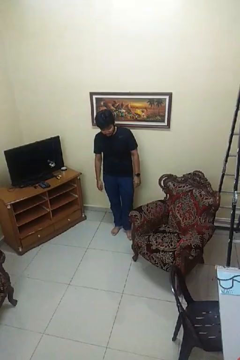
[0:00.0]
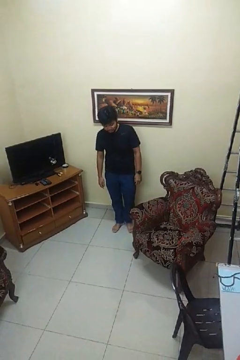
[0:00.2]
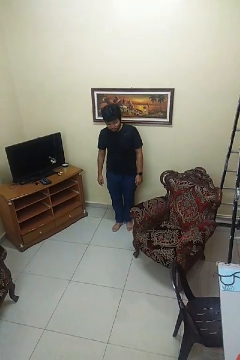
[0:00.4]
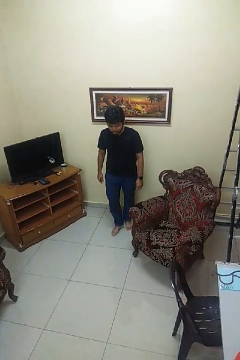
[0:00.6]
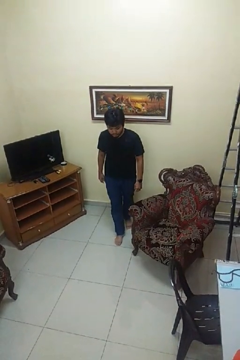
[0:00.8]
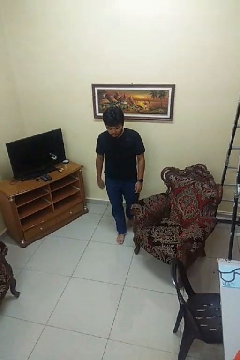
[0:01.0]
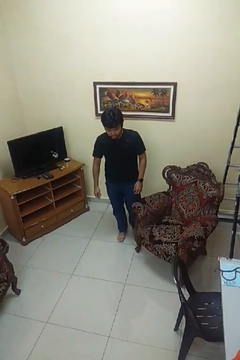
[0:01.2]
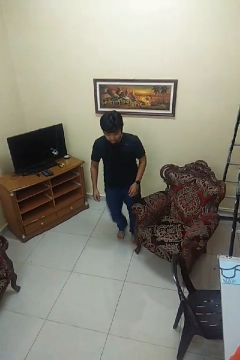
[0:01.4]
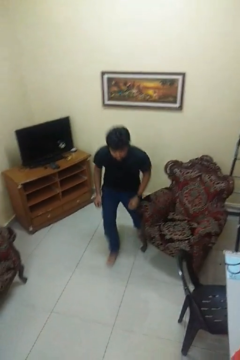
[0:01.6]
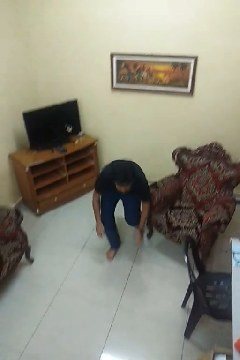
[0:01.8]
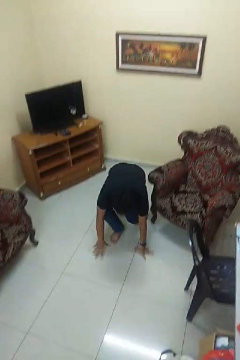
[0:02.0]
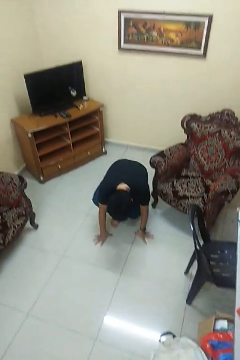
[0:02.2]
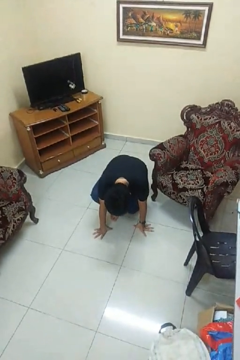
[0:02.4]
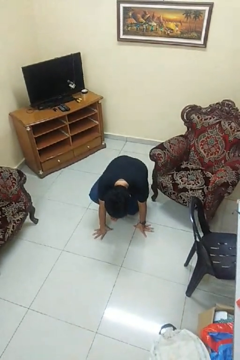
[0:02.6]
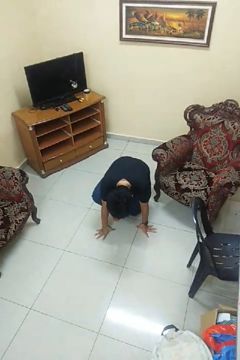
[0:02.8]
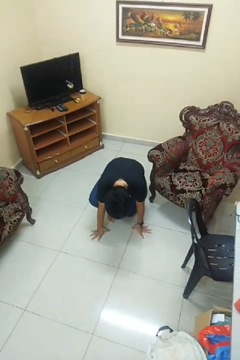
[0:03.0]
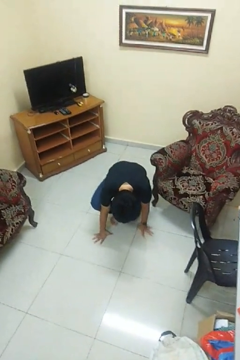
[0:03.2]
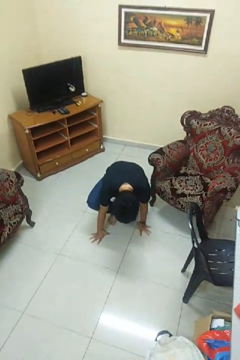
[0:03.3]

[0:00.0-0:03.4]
person trips on object on floor

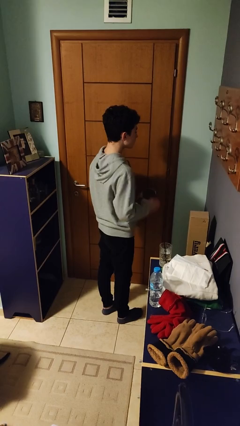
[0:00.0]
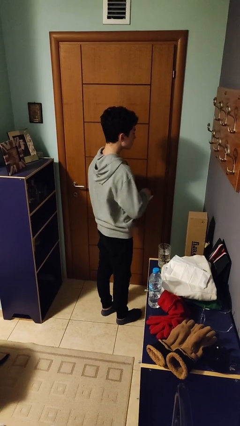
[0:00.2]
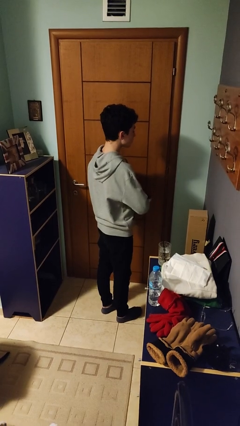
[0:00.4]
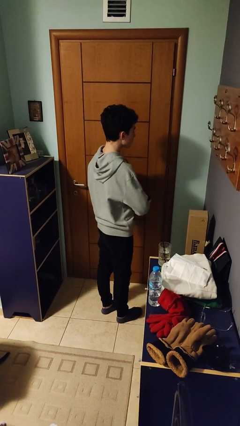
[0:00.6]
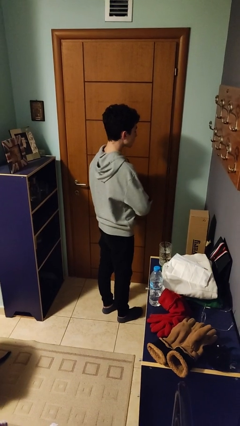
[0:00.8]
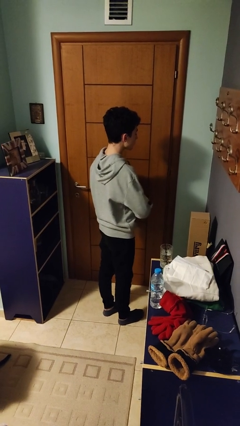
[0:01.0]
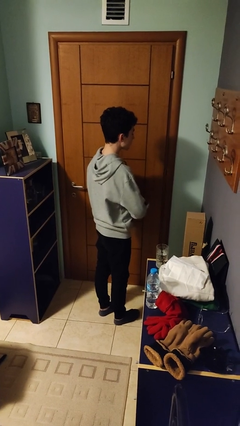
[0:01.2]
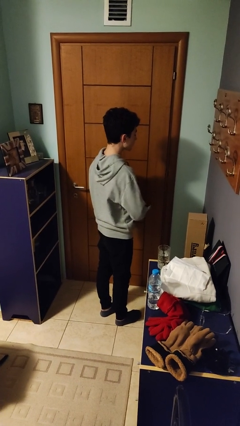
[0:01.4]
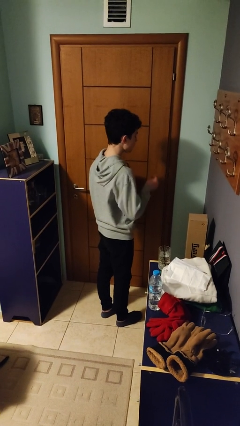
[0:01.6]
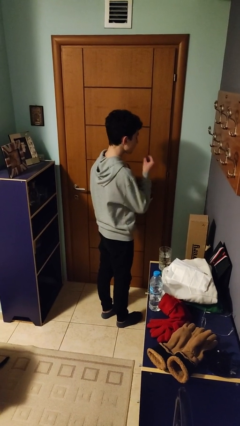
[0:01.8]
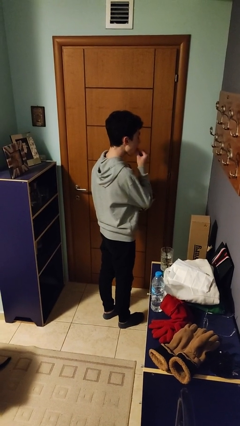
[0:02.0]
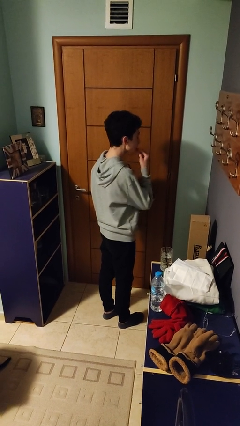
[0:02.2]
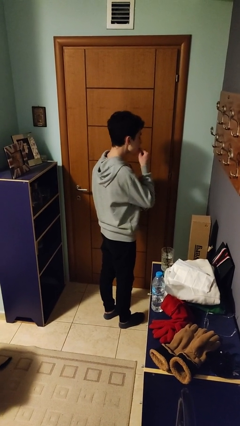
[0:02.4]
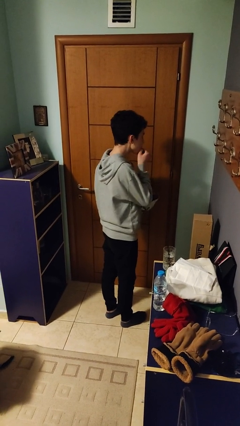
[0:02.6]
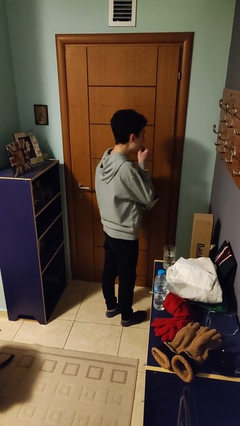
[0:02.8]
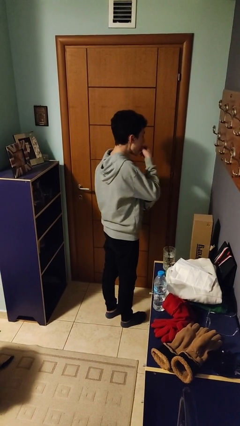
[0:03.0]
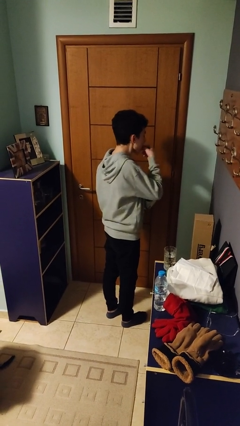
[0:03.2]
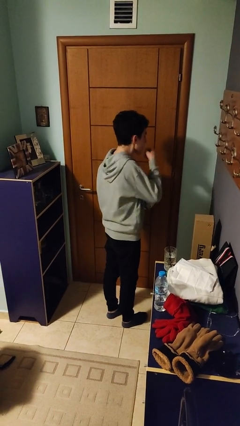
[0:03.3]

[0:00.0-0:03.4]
person eats snack from bag

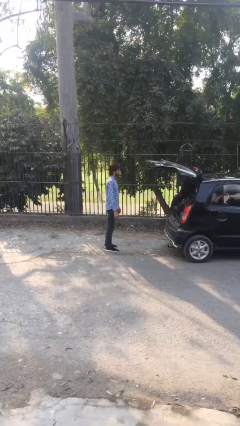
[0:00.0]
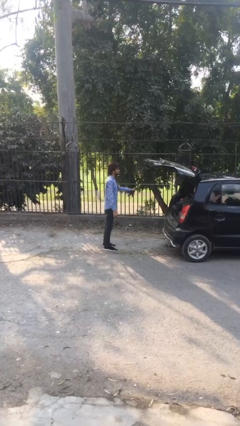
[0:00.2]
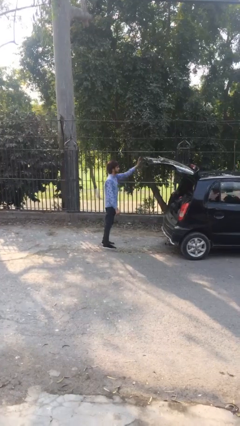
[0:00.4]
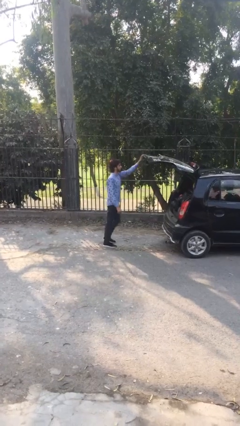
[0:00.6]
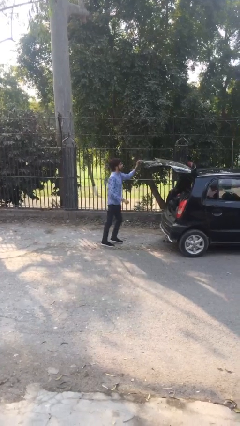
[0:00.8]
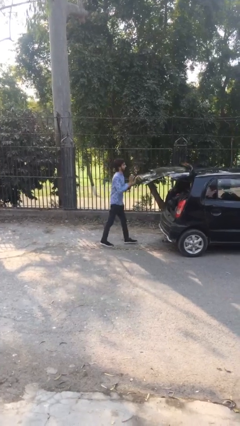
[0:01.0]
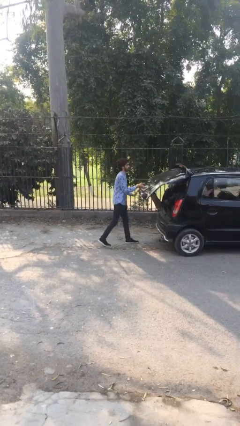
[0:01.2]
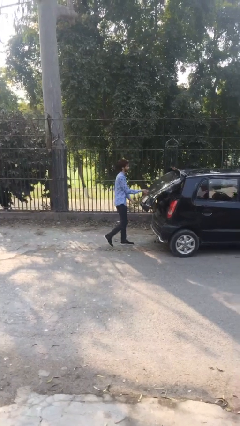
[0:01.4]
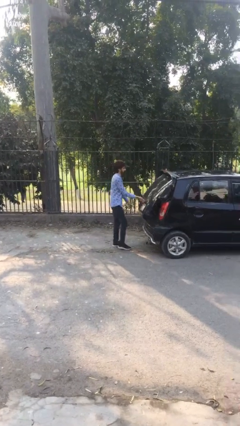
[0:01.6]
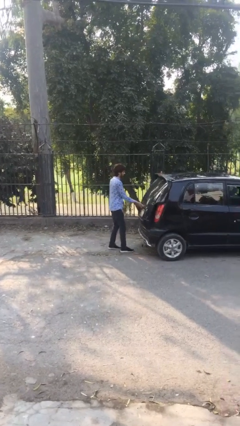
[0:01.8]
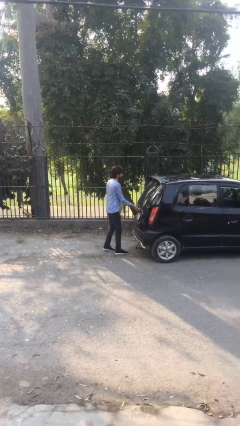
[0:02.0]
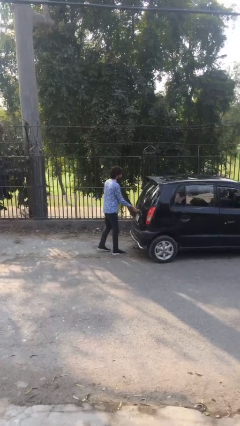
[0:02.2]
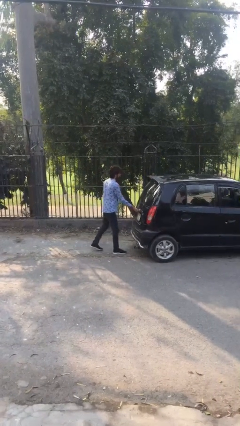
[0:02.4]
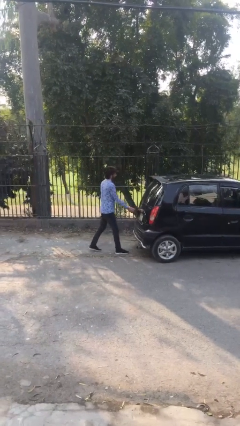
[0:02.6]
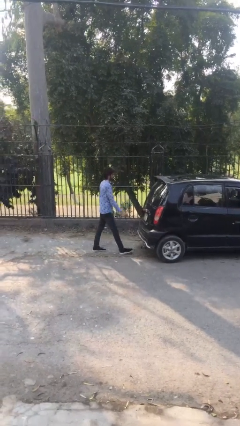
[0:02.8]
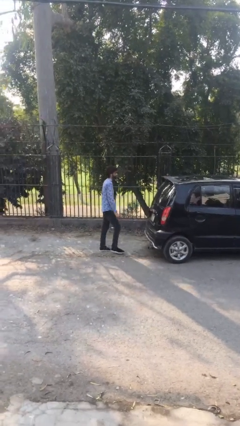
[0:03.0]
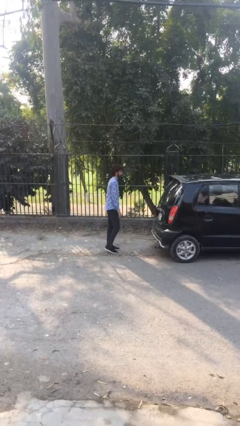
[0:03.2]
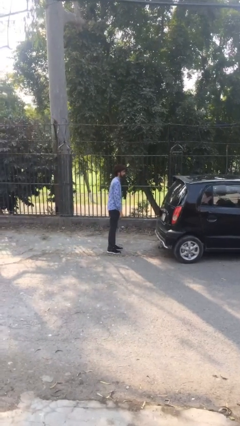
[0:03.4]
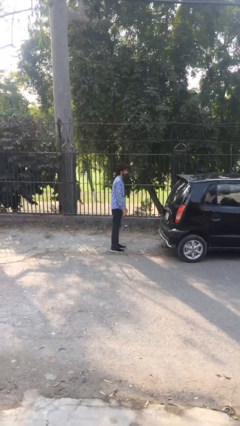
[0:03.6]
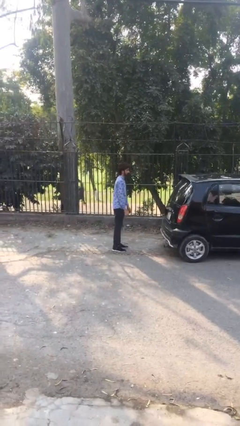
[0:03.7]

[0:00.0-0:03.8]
person closes car trunk

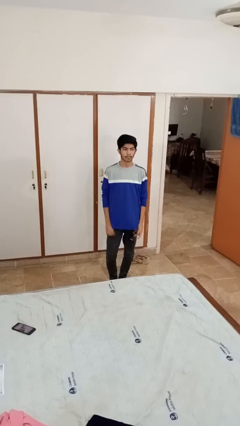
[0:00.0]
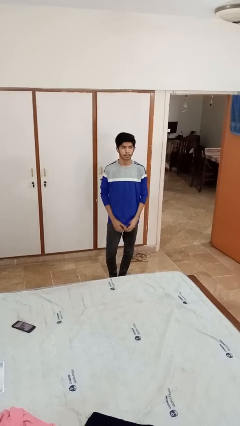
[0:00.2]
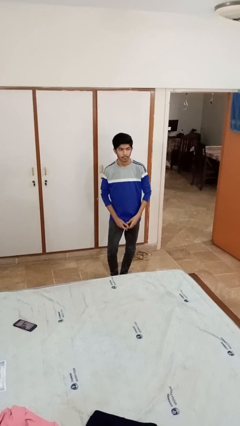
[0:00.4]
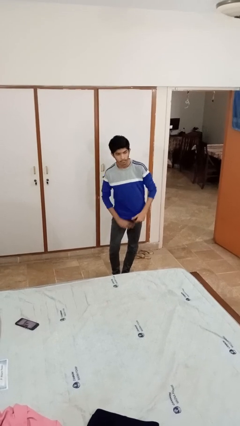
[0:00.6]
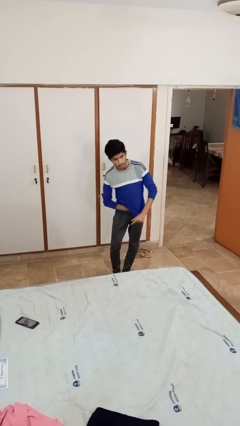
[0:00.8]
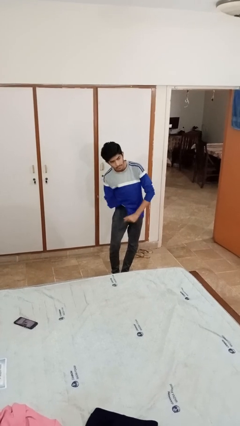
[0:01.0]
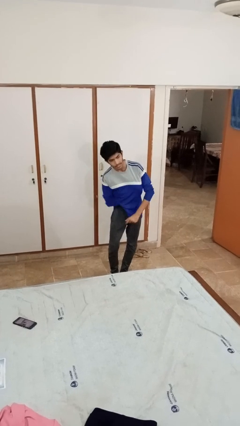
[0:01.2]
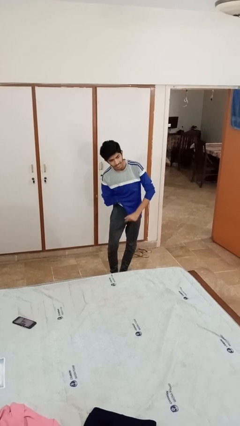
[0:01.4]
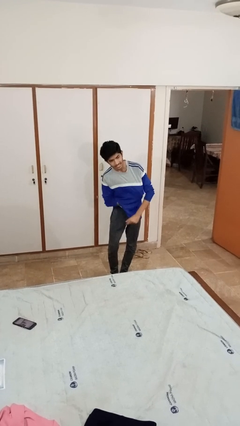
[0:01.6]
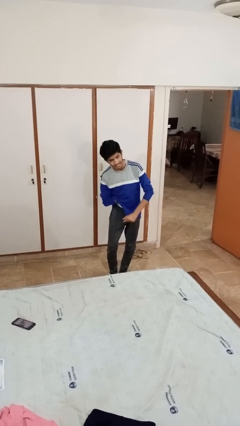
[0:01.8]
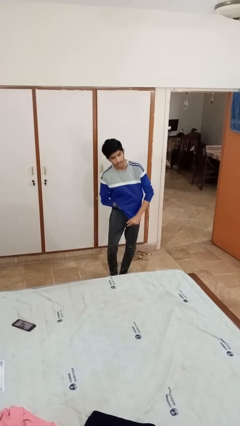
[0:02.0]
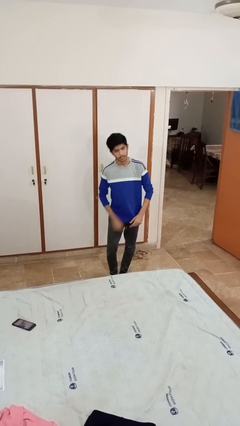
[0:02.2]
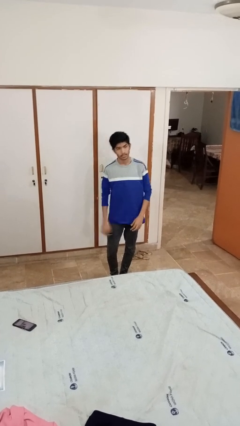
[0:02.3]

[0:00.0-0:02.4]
person applies deodorant

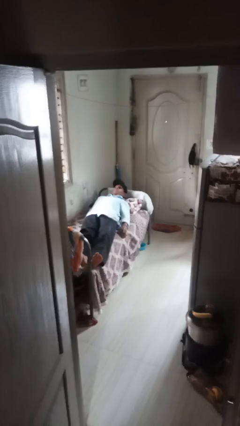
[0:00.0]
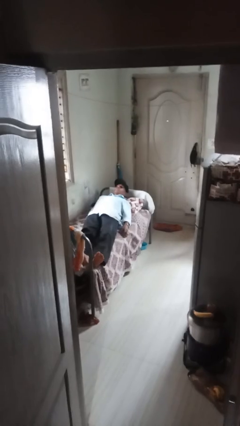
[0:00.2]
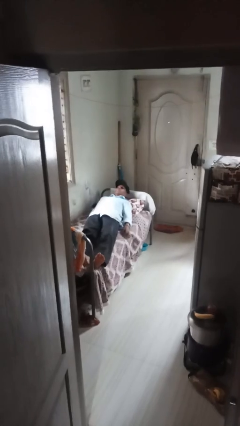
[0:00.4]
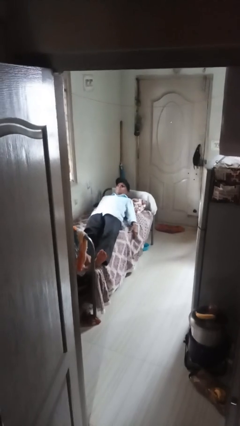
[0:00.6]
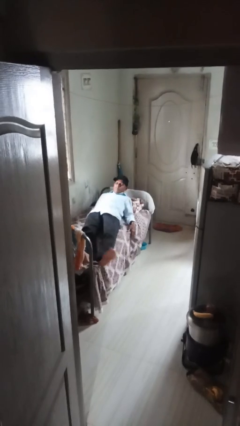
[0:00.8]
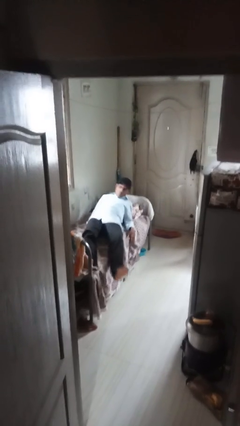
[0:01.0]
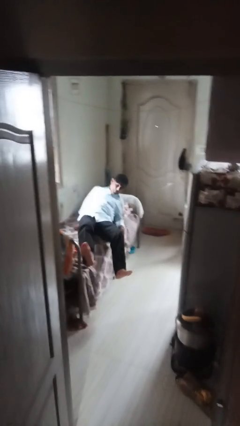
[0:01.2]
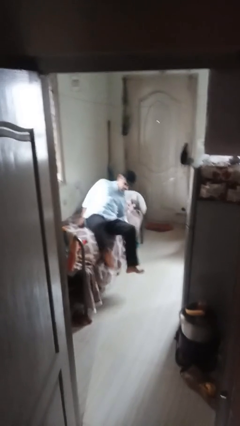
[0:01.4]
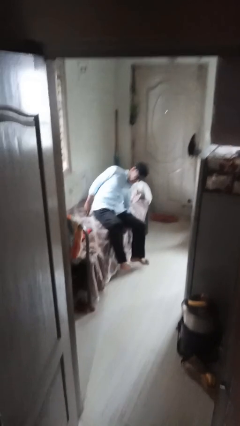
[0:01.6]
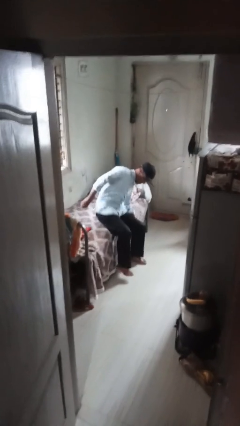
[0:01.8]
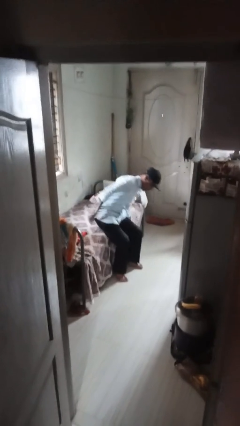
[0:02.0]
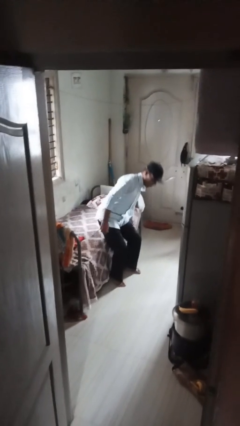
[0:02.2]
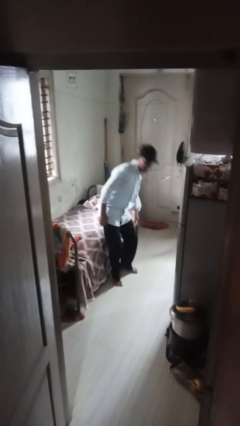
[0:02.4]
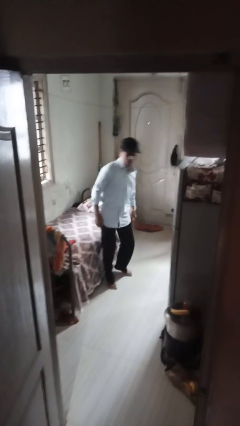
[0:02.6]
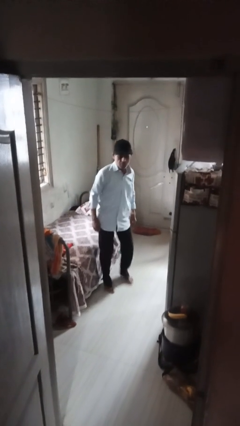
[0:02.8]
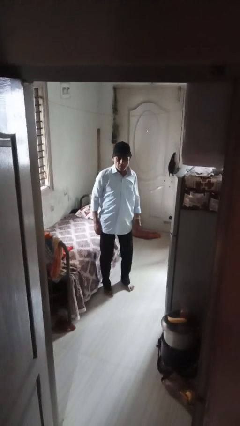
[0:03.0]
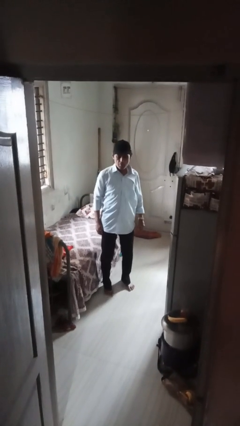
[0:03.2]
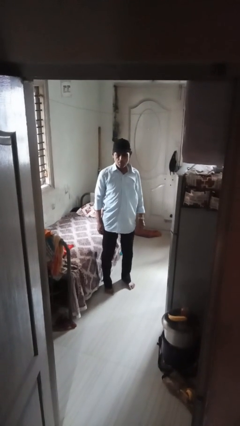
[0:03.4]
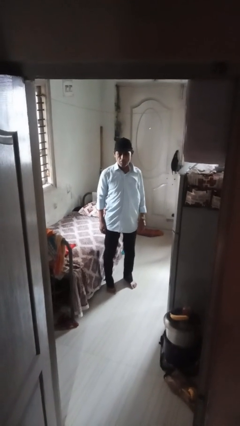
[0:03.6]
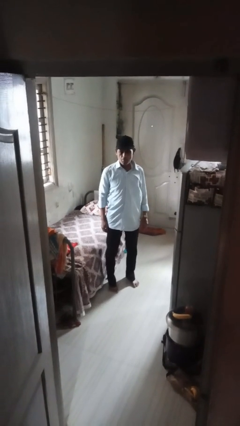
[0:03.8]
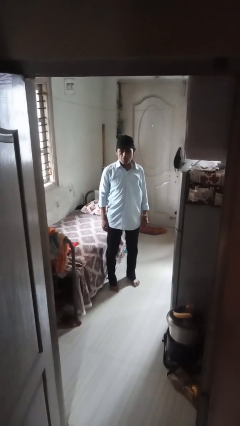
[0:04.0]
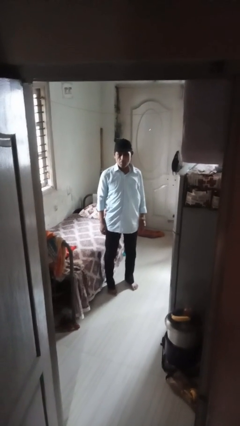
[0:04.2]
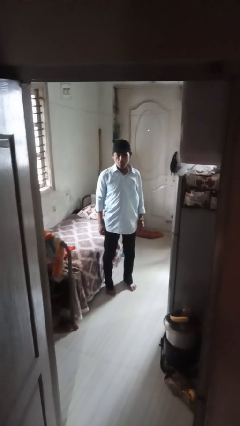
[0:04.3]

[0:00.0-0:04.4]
person stands up

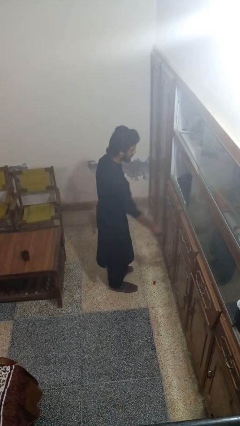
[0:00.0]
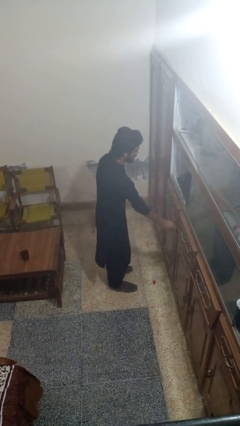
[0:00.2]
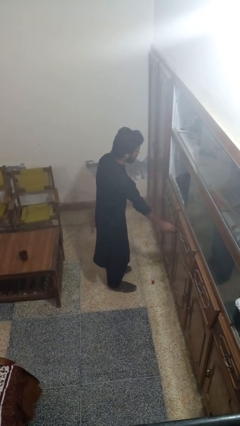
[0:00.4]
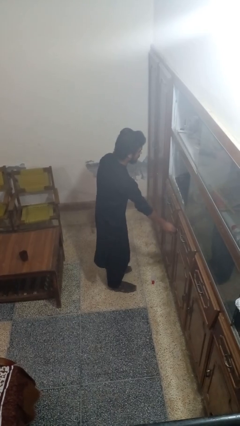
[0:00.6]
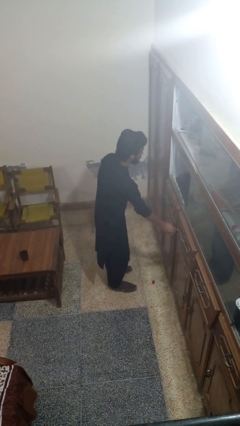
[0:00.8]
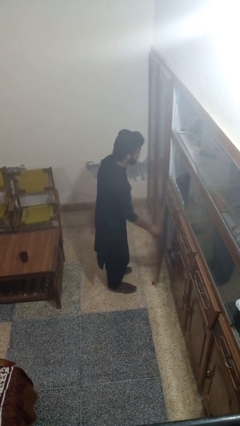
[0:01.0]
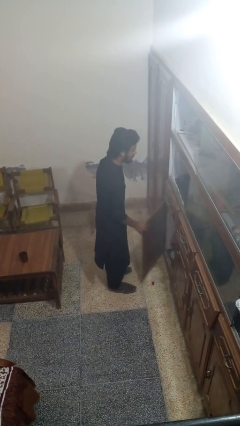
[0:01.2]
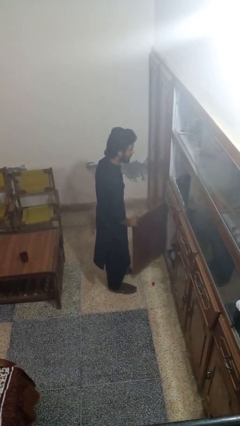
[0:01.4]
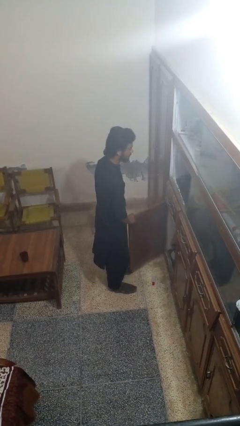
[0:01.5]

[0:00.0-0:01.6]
person opens cabinet
